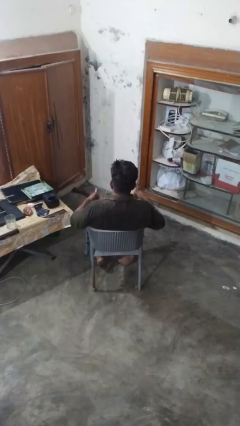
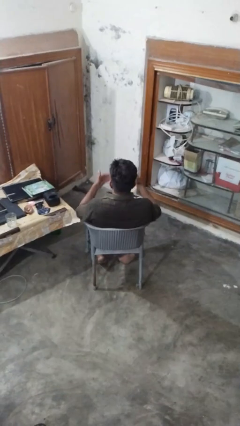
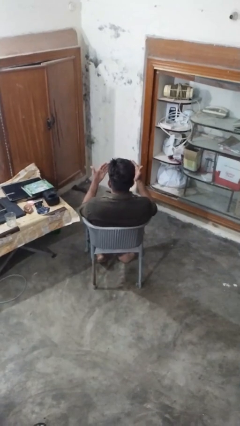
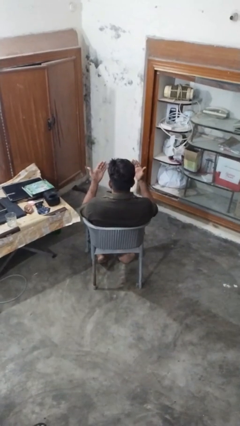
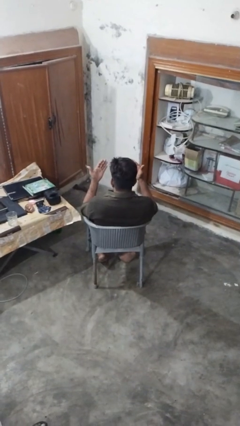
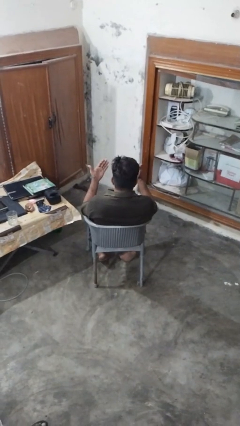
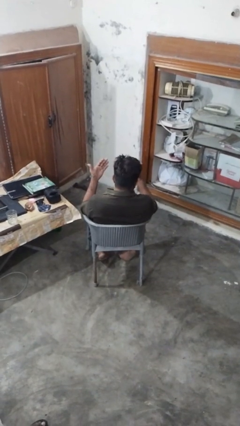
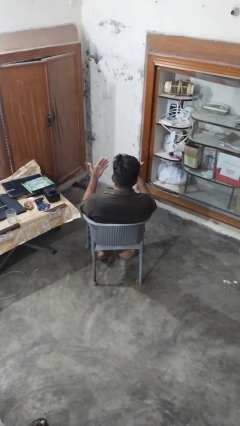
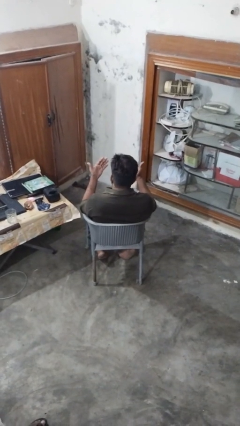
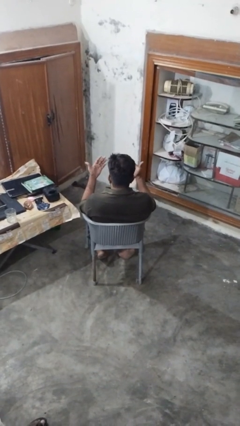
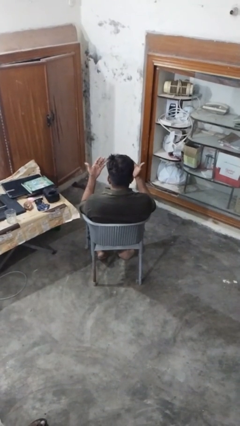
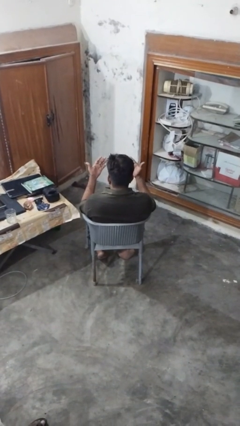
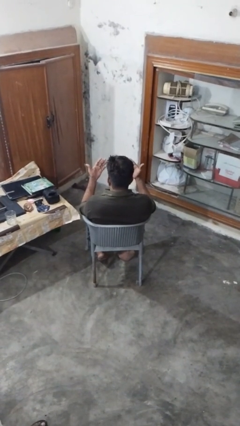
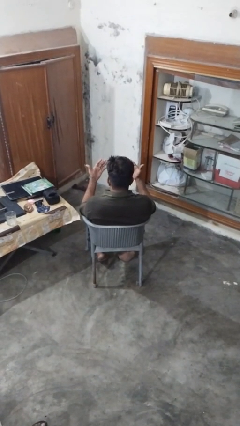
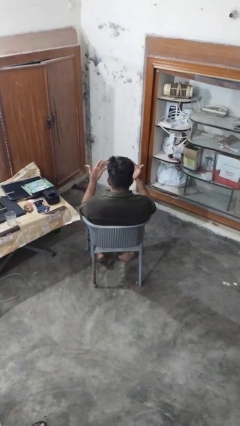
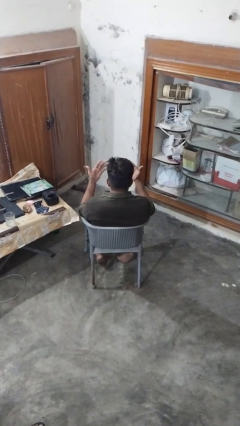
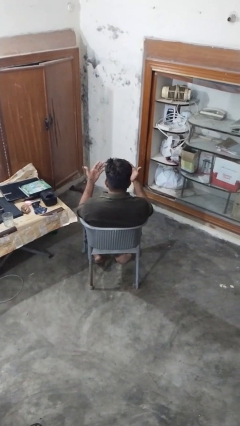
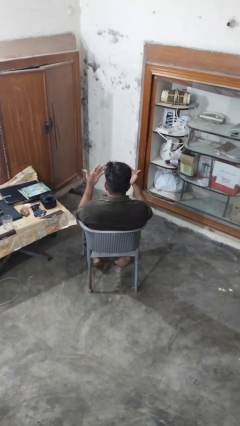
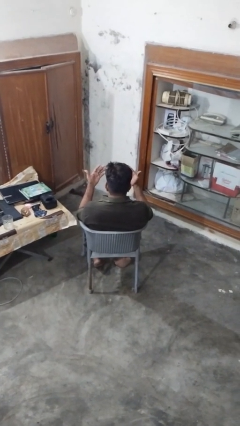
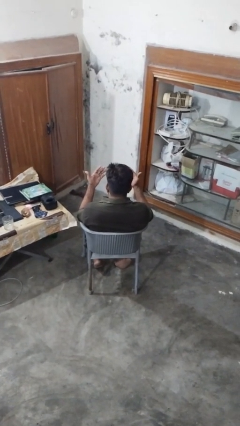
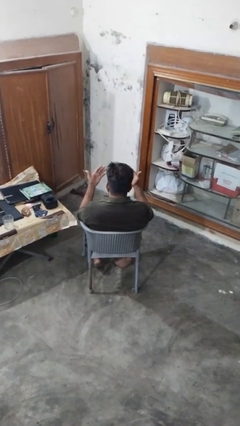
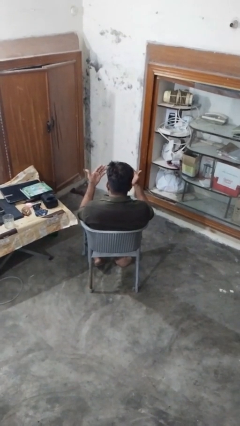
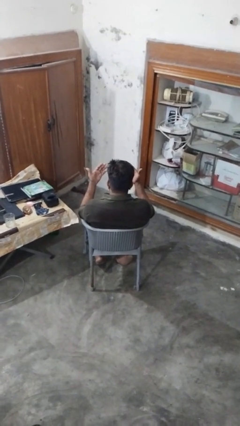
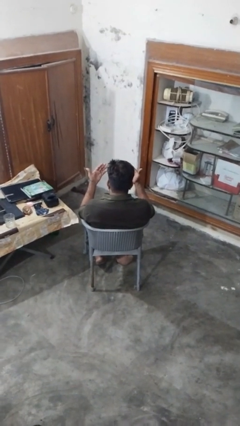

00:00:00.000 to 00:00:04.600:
person looks at hands in lap

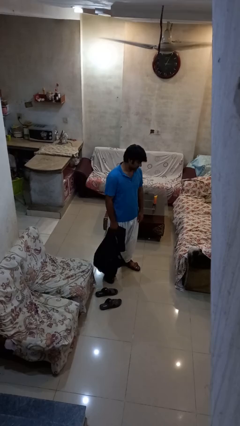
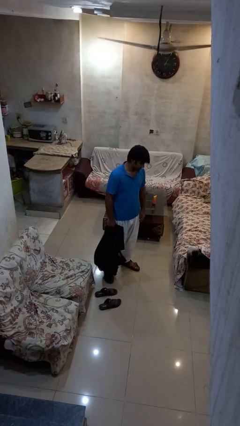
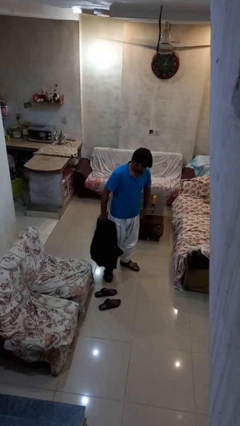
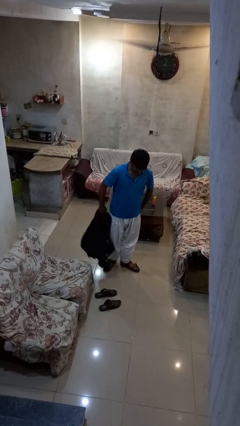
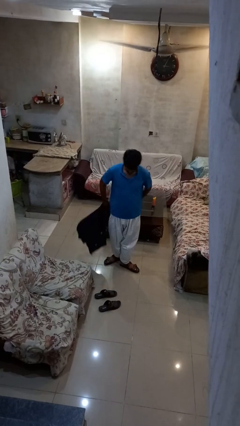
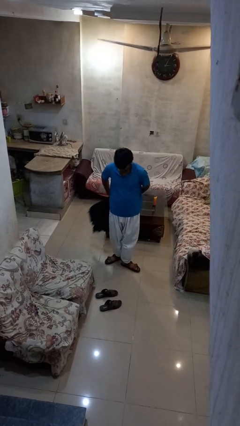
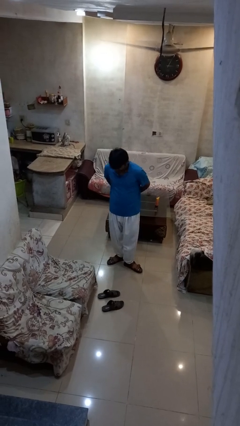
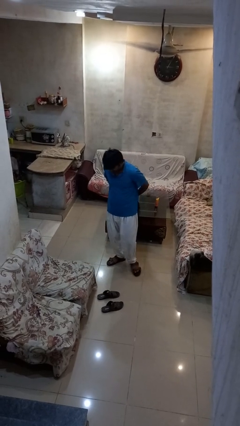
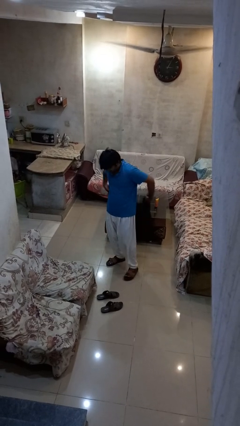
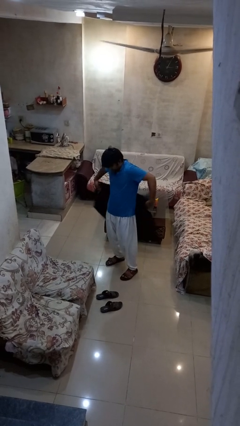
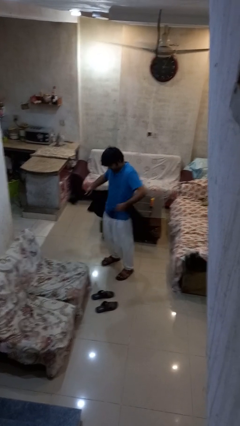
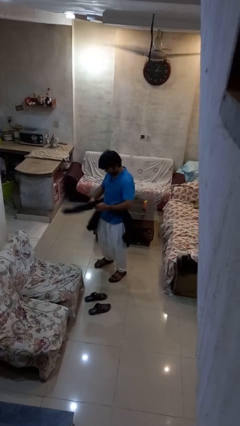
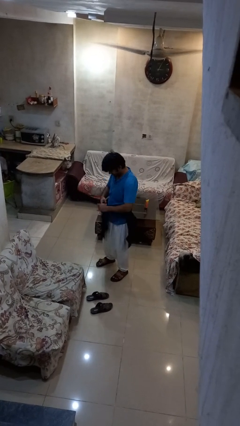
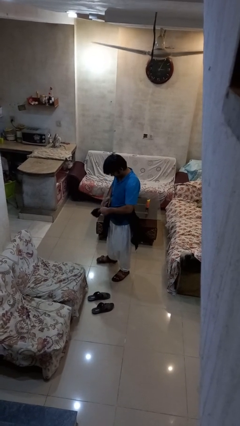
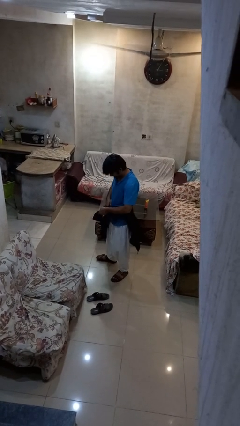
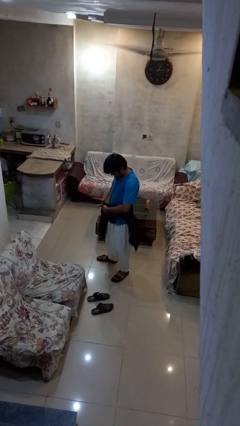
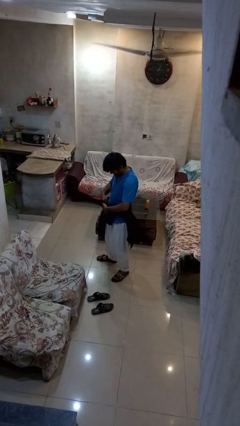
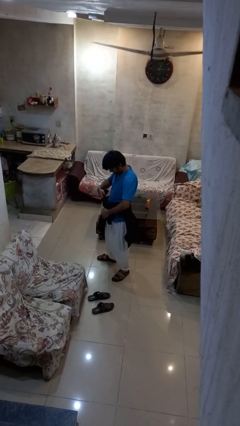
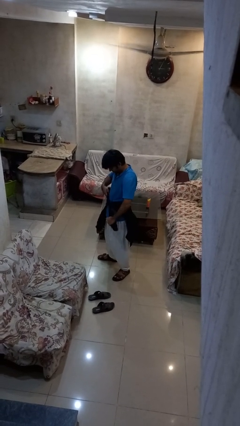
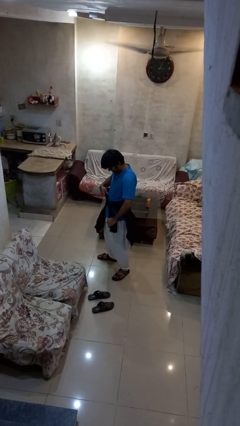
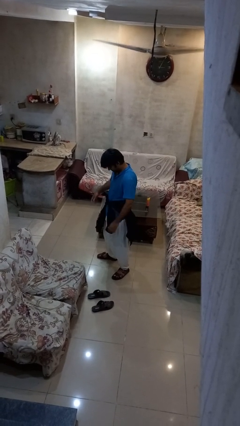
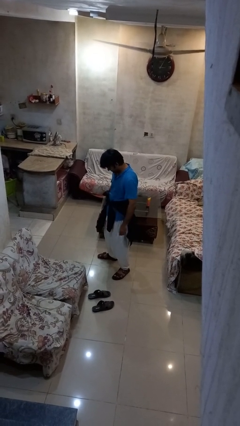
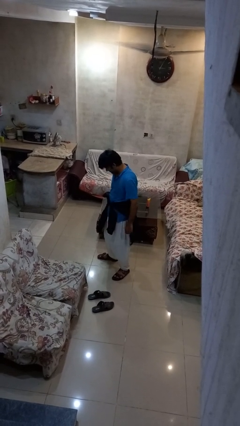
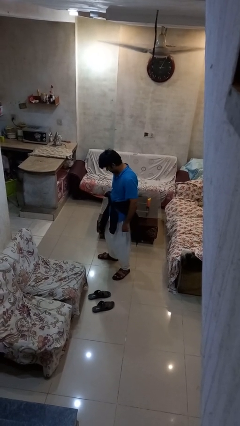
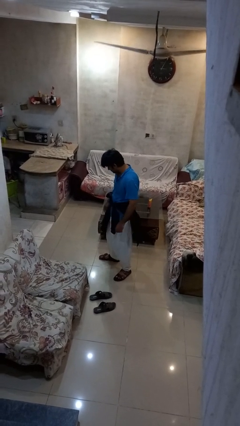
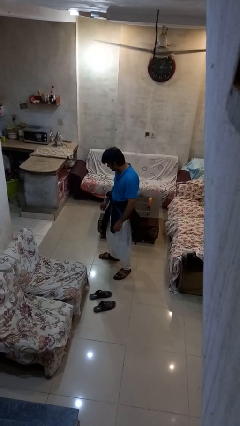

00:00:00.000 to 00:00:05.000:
person ties jacket around waist

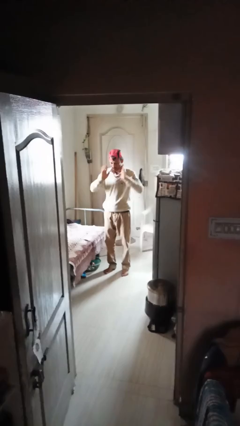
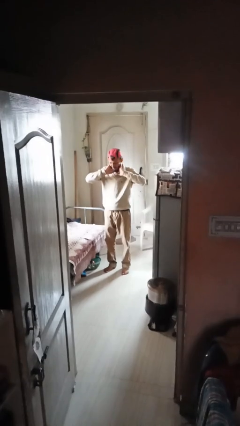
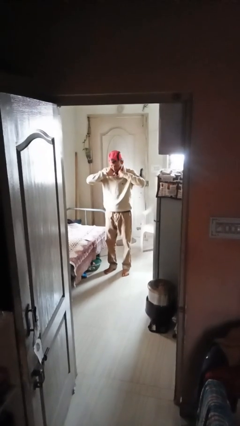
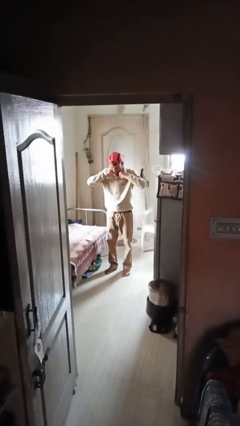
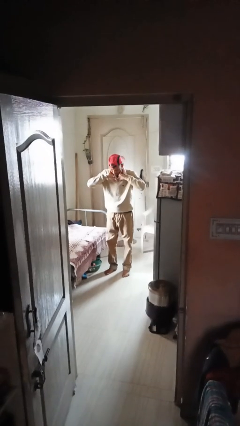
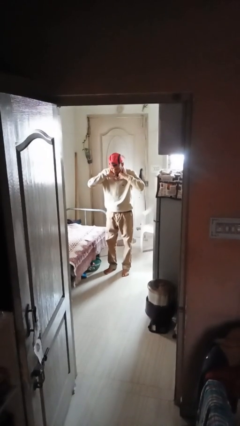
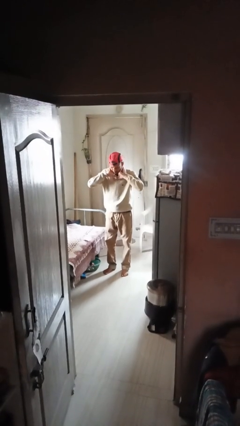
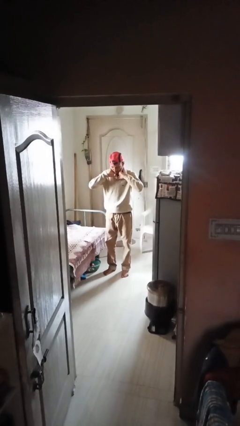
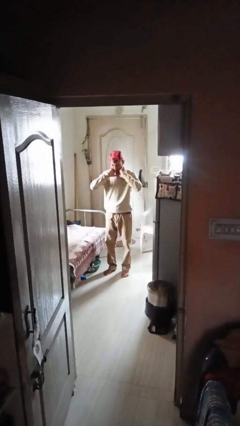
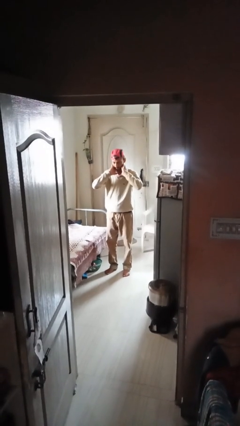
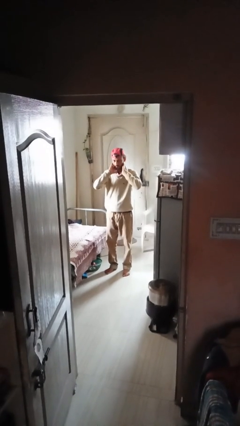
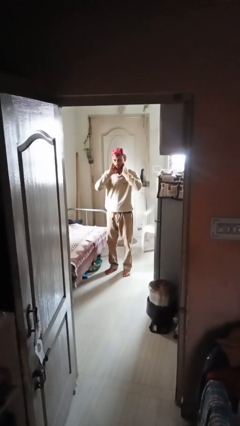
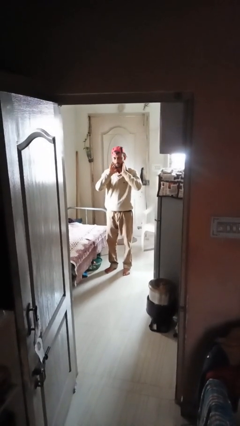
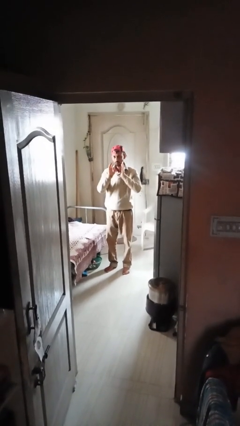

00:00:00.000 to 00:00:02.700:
person cracks knuckles

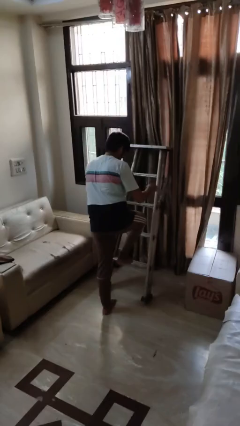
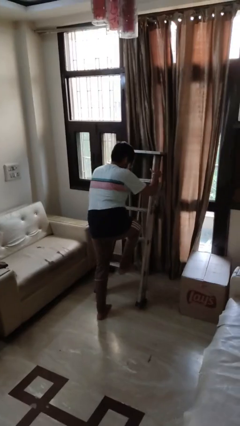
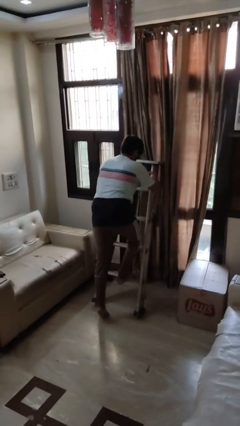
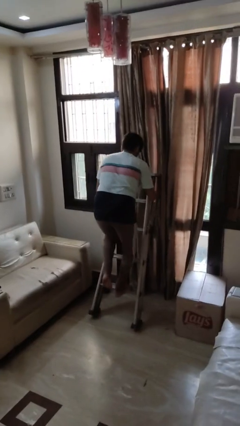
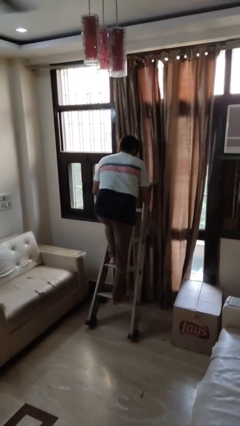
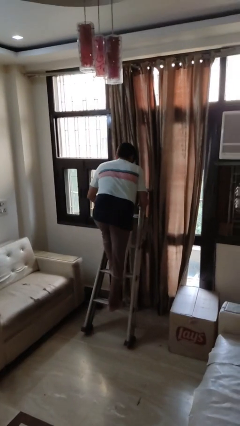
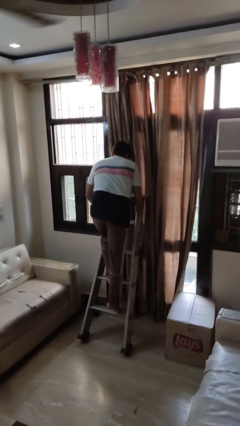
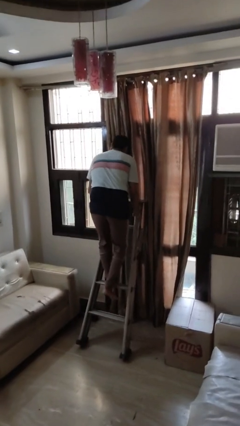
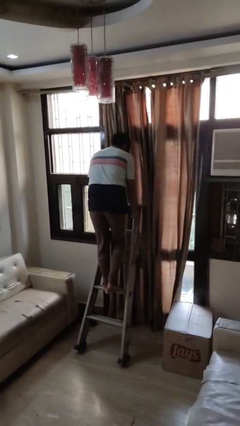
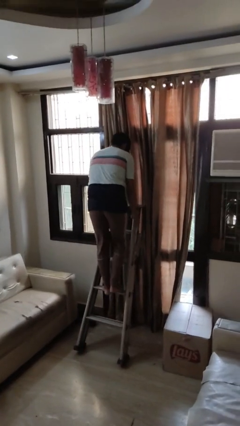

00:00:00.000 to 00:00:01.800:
person climbs up ladder

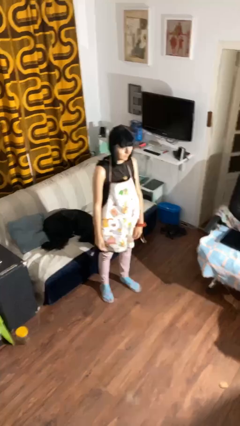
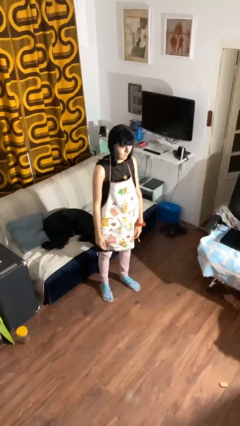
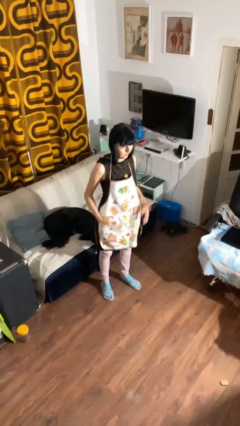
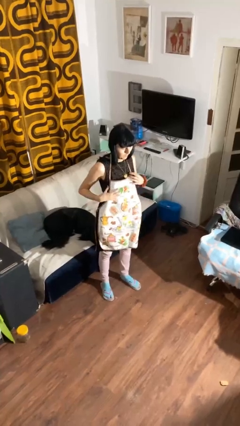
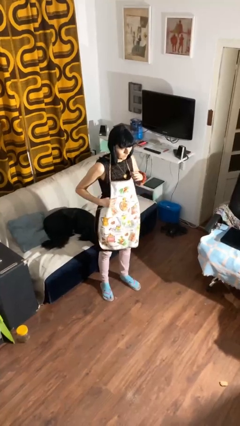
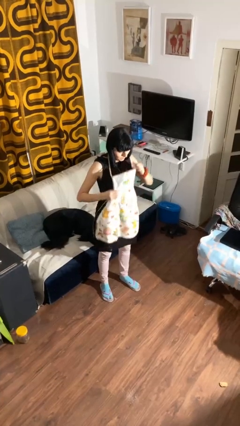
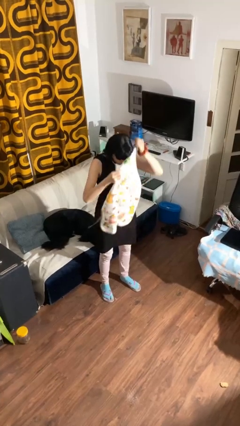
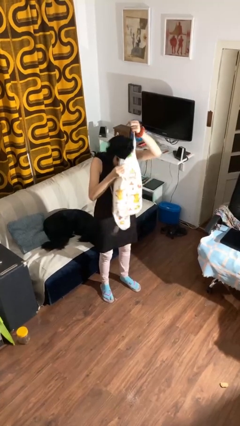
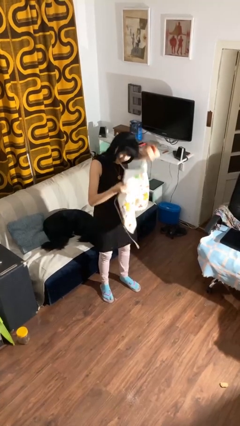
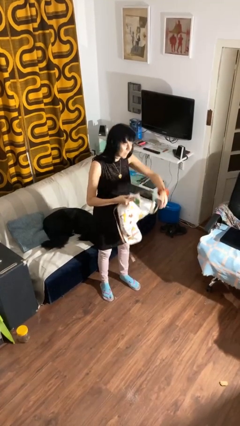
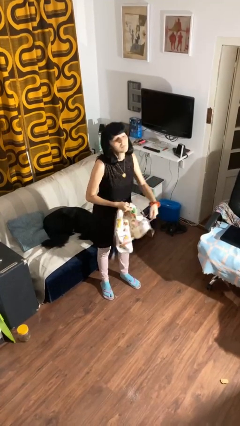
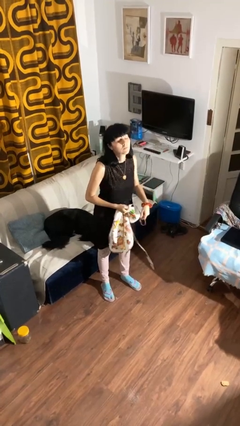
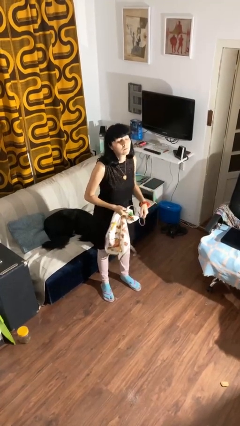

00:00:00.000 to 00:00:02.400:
person takes off apron

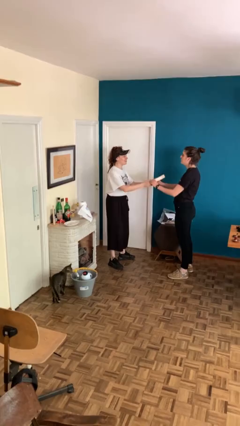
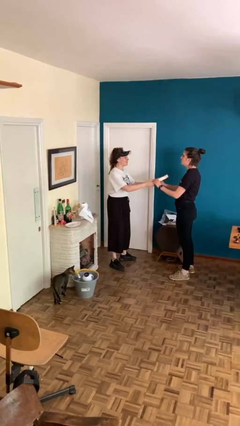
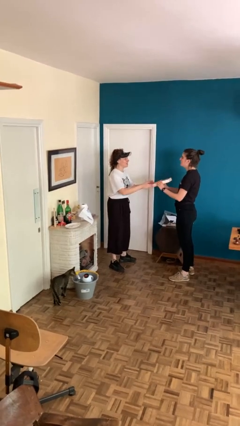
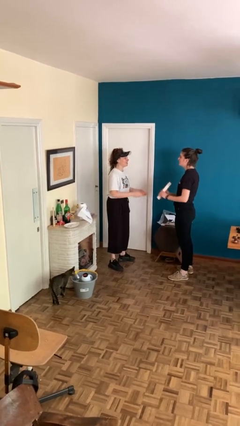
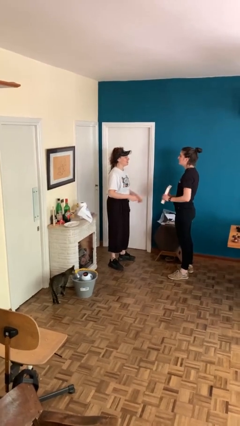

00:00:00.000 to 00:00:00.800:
person transfers object to person
